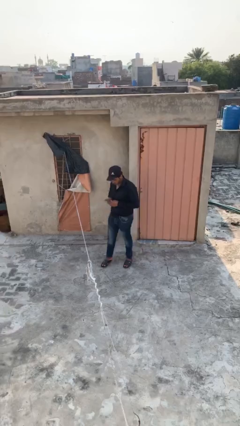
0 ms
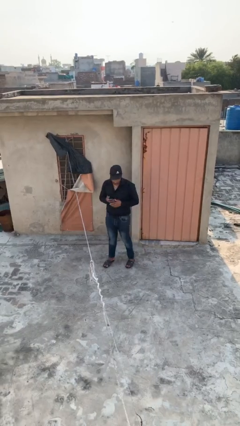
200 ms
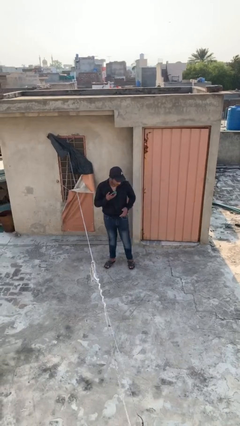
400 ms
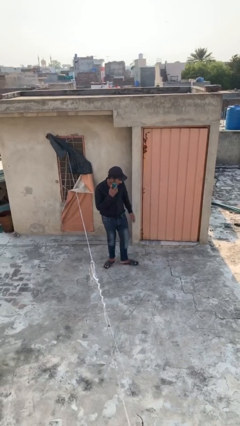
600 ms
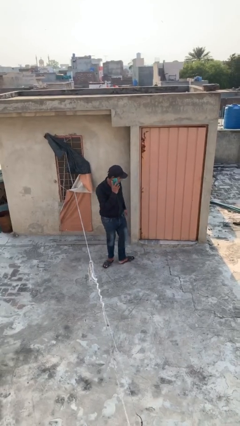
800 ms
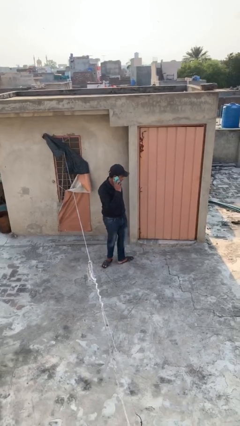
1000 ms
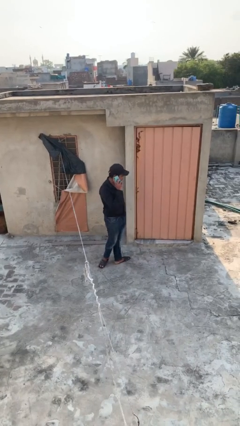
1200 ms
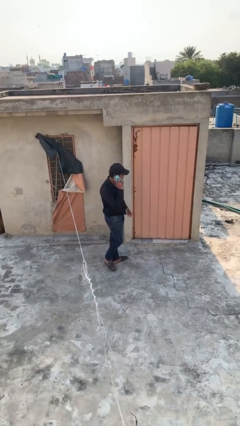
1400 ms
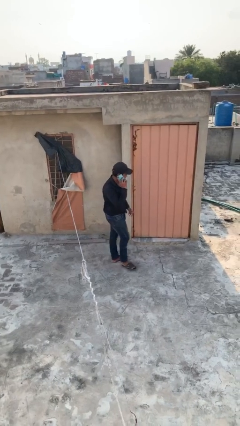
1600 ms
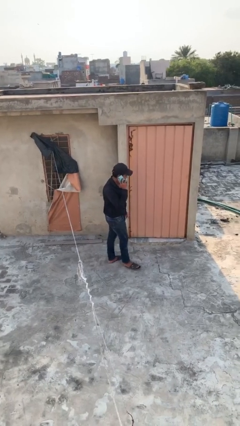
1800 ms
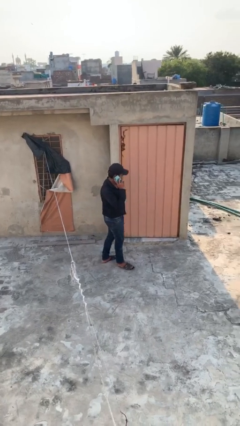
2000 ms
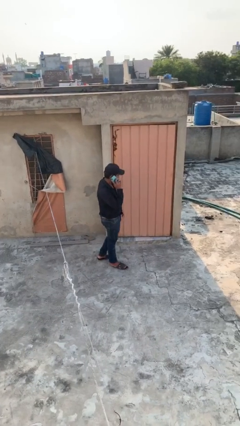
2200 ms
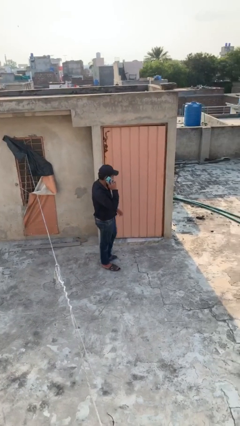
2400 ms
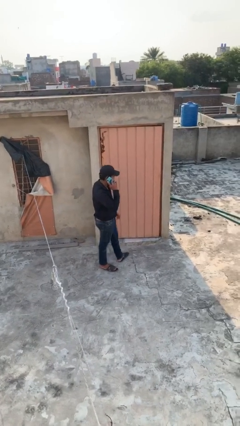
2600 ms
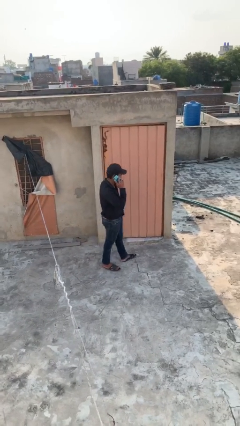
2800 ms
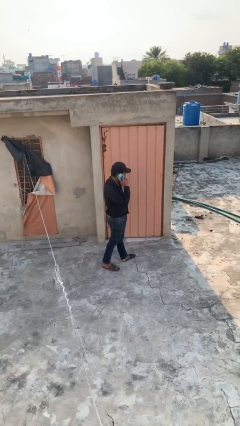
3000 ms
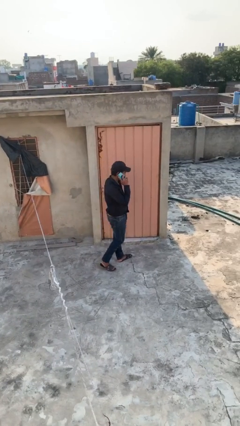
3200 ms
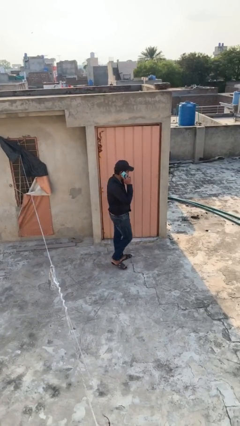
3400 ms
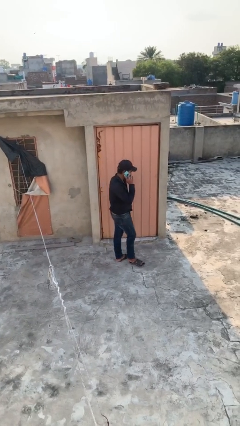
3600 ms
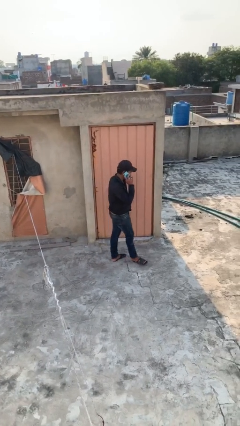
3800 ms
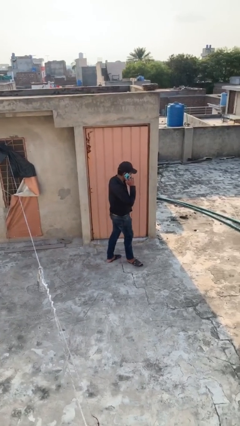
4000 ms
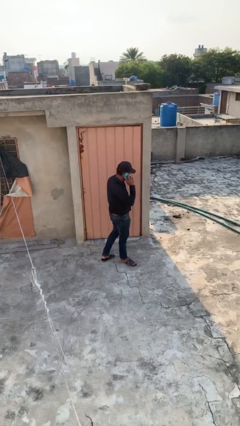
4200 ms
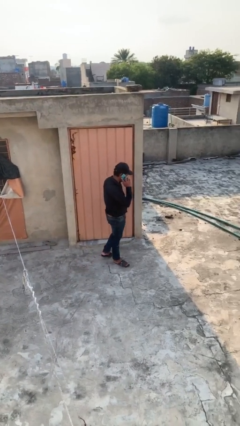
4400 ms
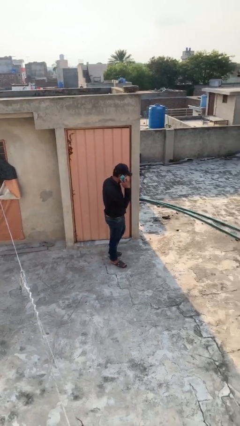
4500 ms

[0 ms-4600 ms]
person talks on phone

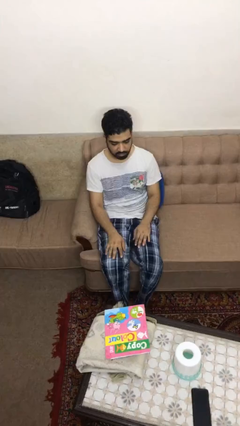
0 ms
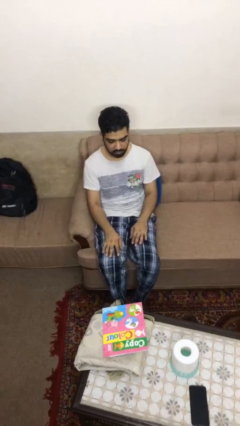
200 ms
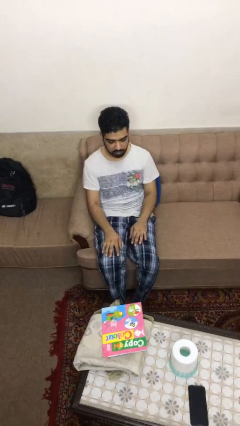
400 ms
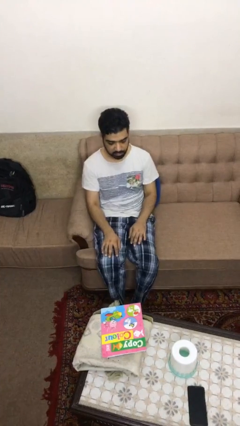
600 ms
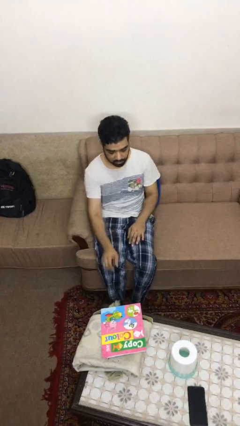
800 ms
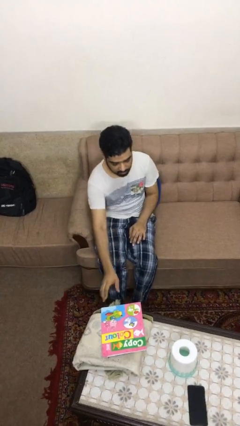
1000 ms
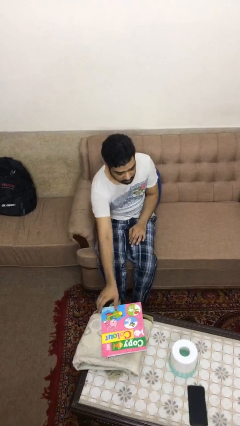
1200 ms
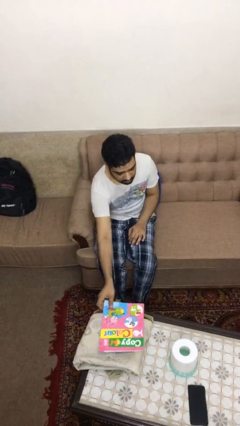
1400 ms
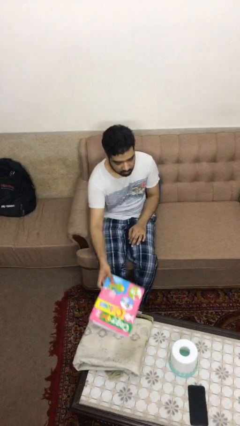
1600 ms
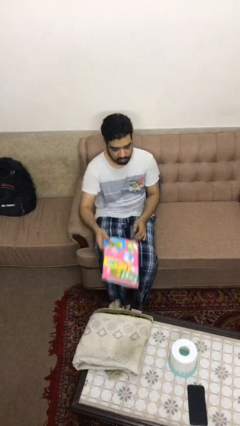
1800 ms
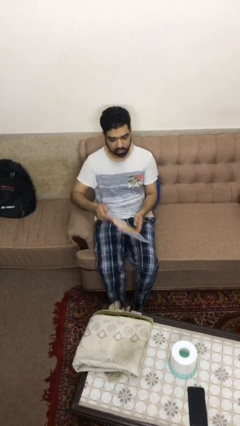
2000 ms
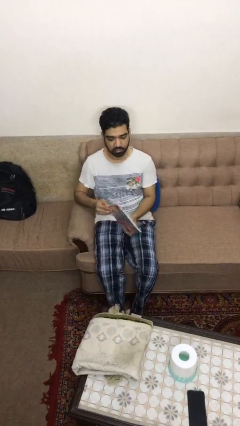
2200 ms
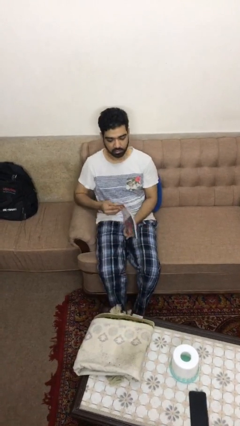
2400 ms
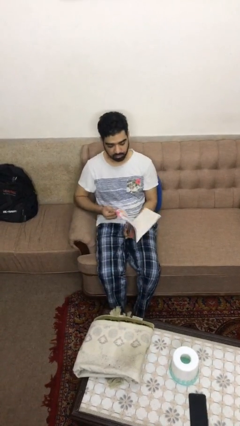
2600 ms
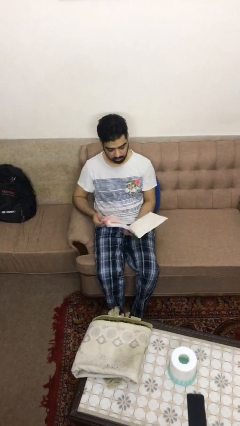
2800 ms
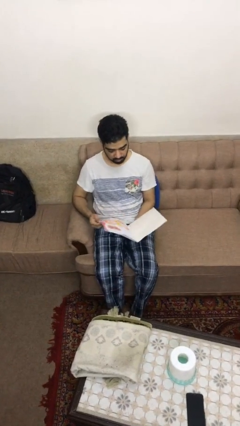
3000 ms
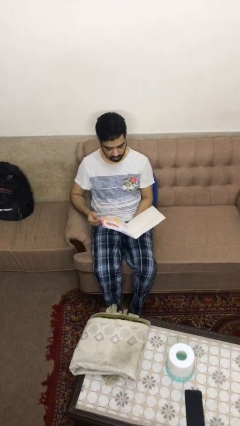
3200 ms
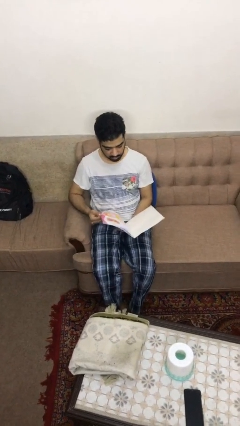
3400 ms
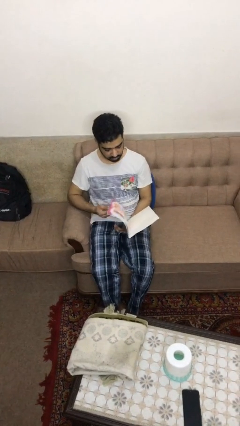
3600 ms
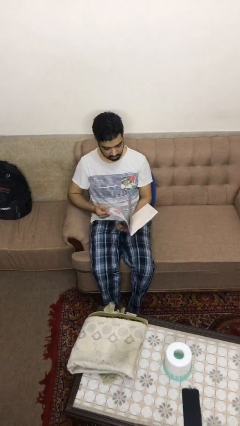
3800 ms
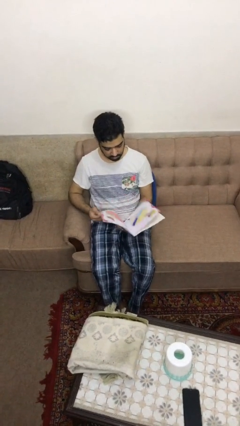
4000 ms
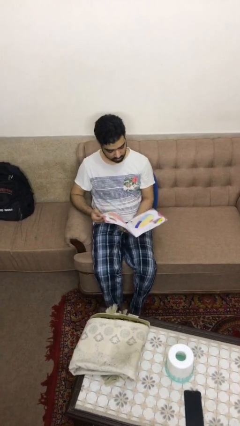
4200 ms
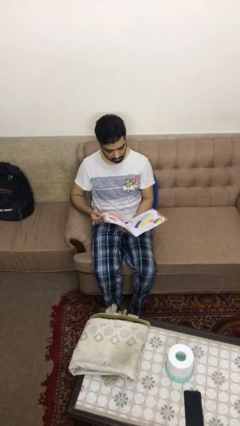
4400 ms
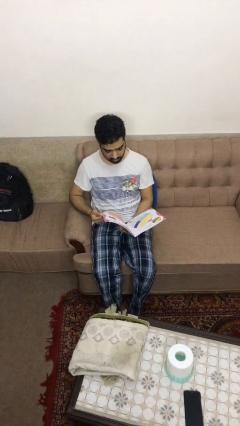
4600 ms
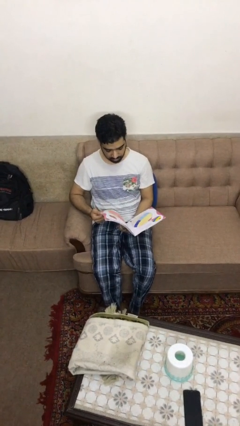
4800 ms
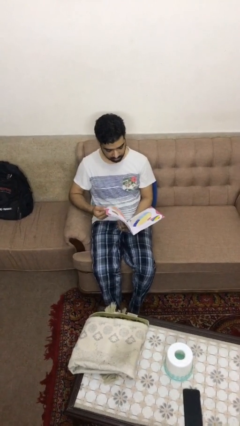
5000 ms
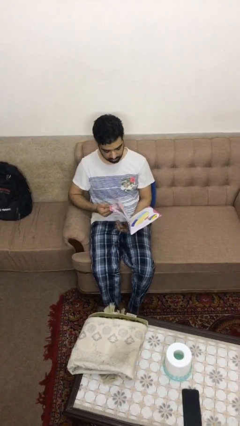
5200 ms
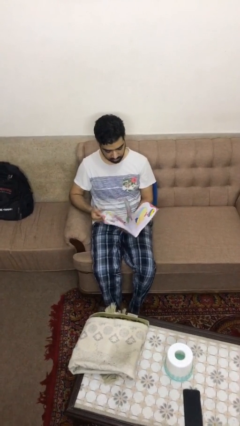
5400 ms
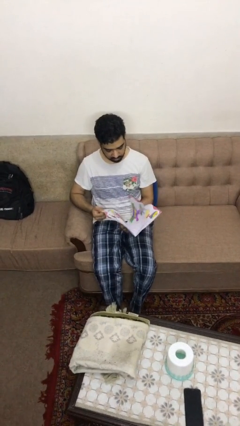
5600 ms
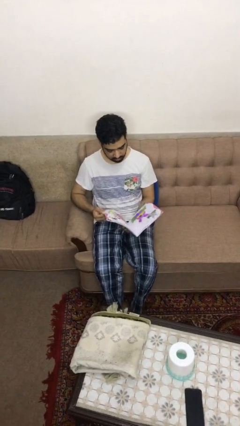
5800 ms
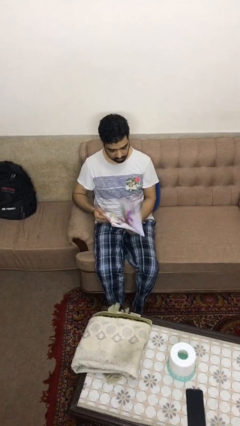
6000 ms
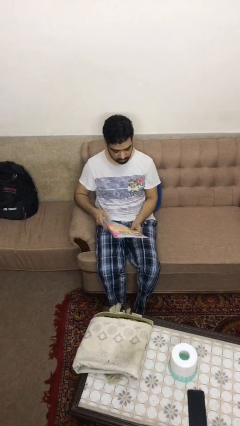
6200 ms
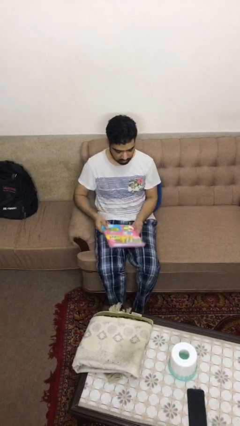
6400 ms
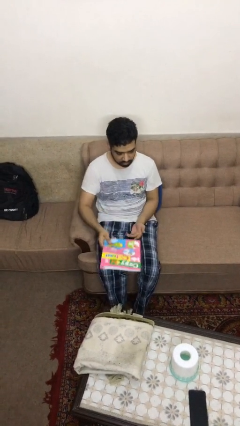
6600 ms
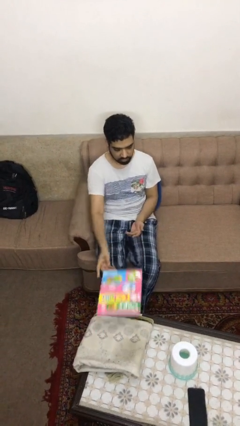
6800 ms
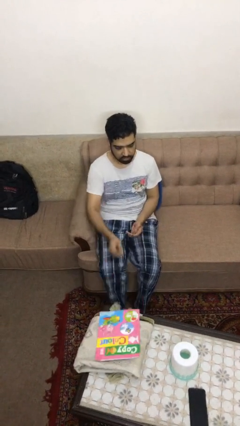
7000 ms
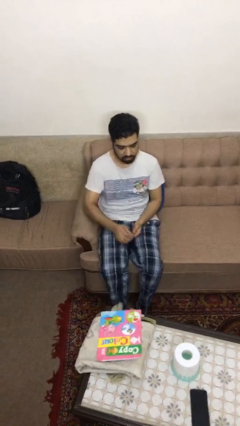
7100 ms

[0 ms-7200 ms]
person reads magazine

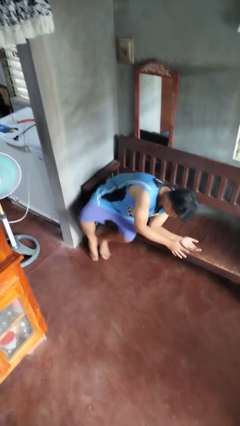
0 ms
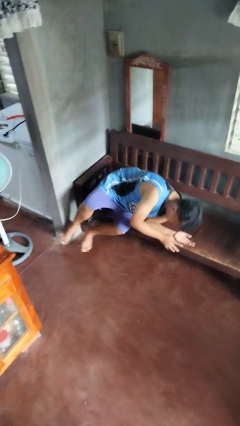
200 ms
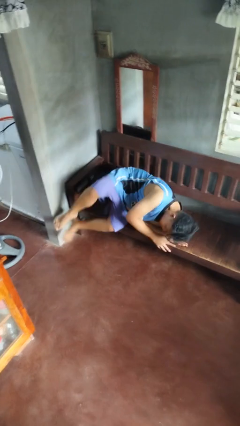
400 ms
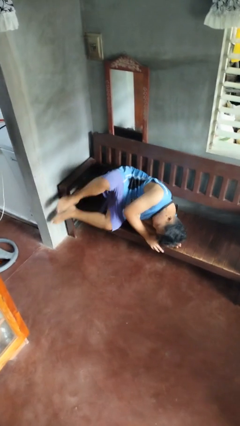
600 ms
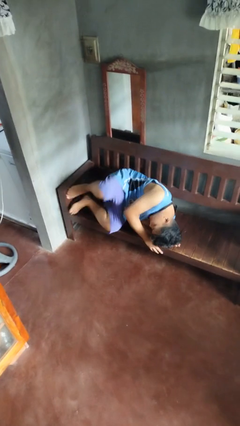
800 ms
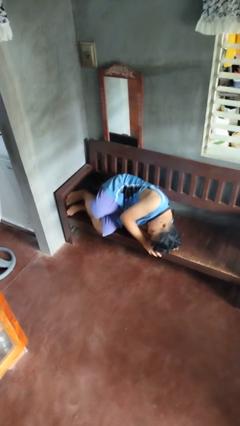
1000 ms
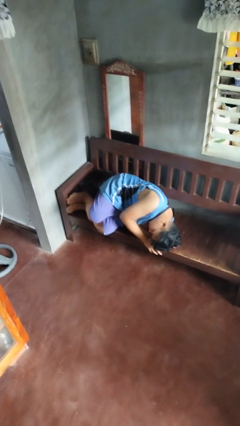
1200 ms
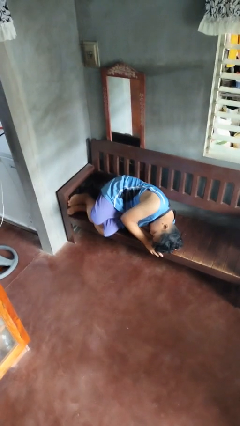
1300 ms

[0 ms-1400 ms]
person lies down on couch

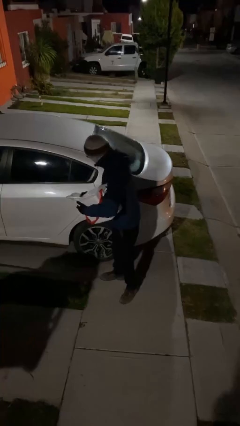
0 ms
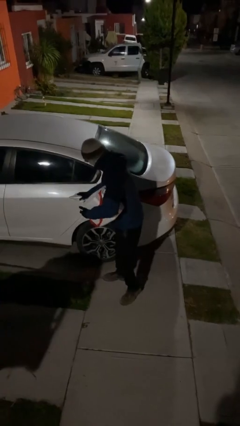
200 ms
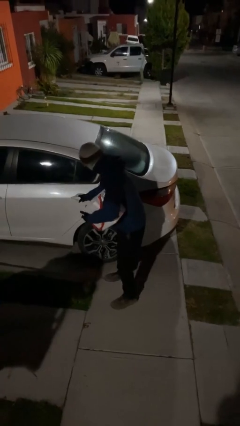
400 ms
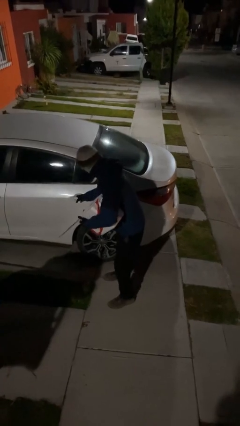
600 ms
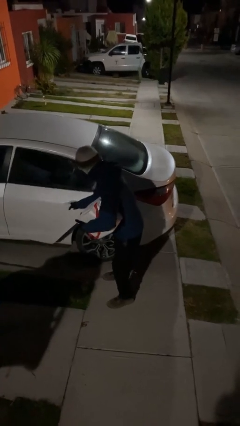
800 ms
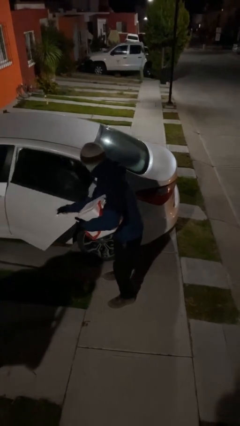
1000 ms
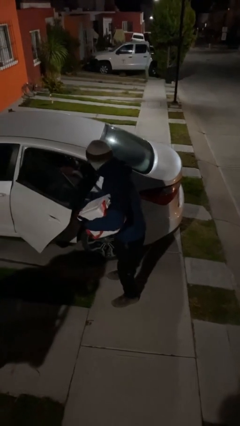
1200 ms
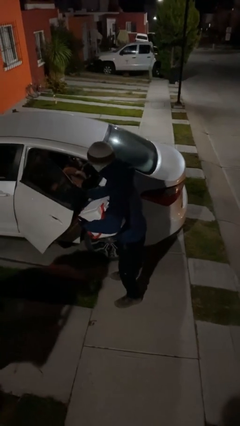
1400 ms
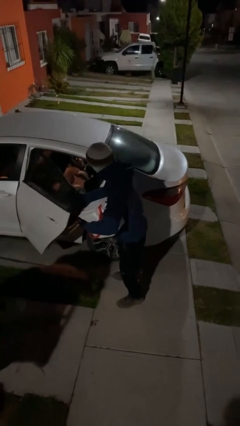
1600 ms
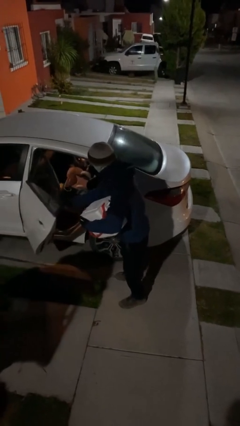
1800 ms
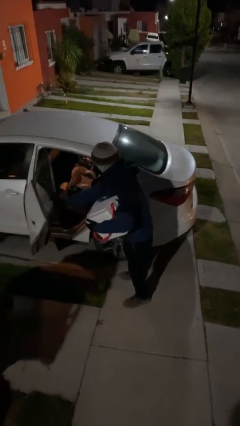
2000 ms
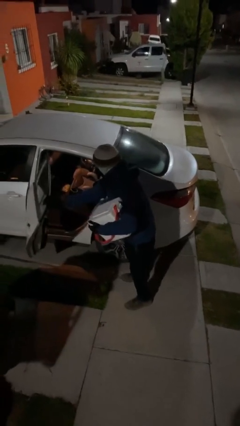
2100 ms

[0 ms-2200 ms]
person opens car door

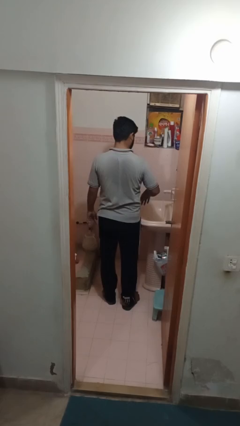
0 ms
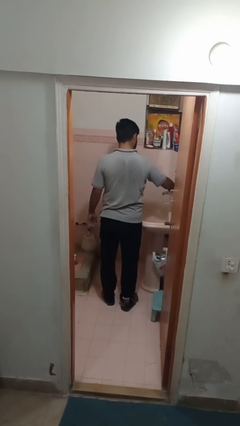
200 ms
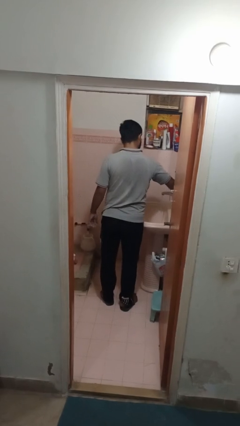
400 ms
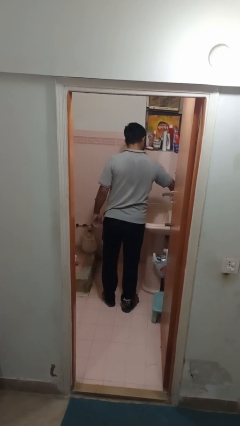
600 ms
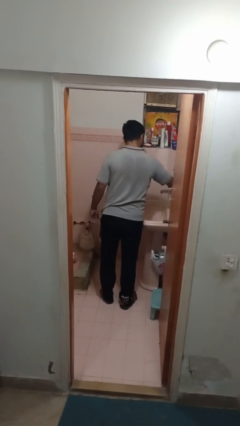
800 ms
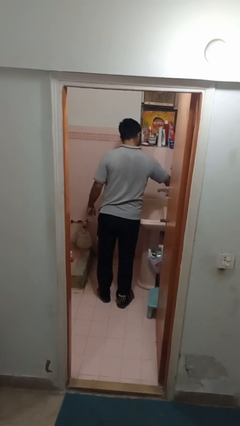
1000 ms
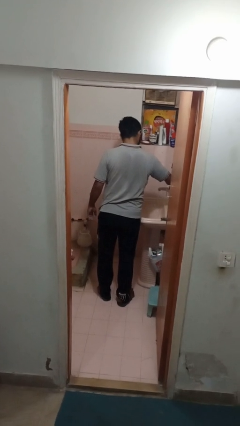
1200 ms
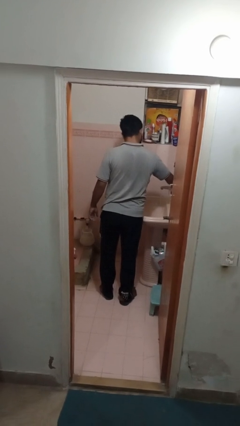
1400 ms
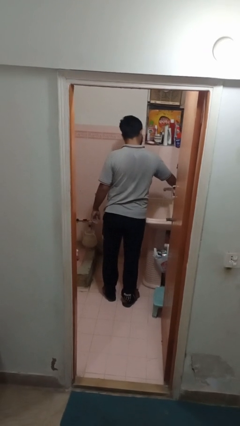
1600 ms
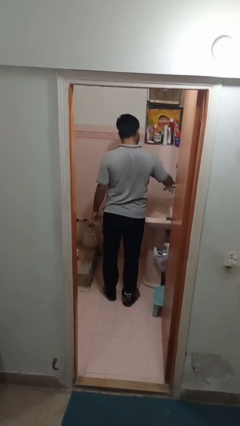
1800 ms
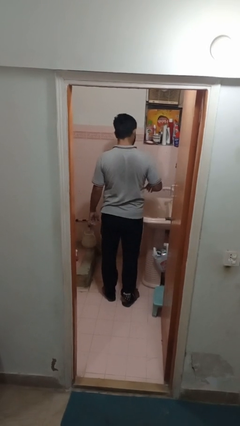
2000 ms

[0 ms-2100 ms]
person turns off faucet

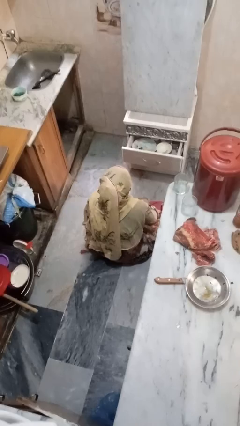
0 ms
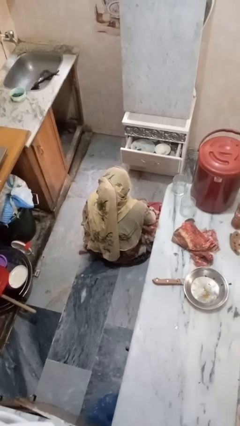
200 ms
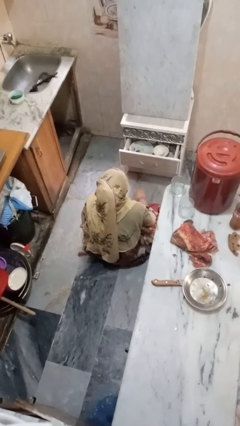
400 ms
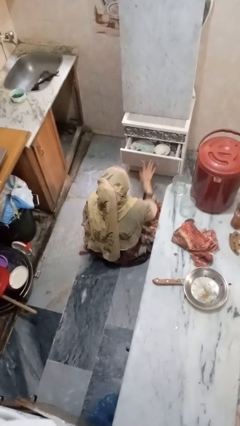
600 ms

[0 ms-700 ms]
person closes kitchen drawer
